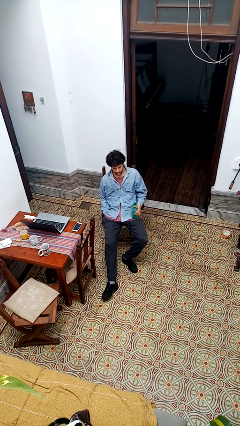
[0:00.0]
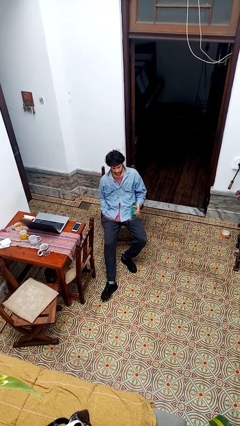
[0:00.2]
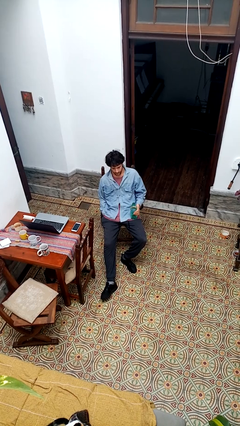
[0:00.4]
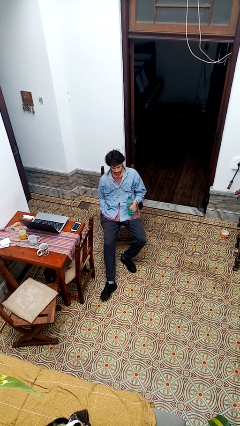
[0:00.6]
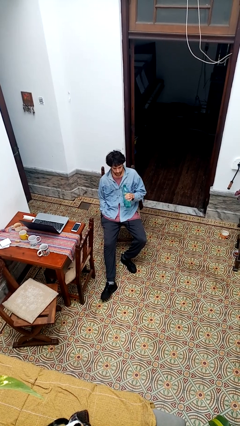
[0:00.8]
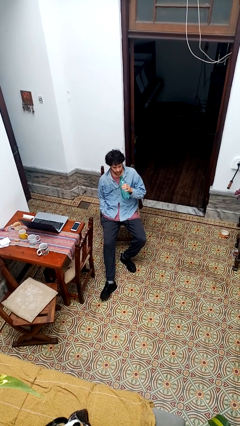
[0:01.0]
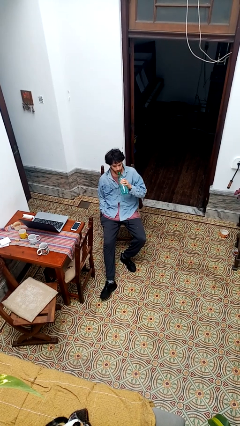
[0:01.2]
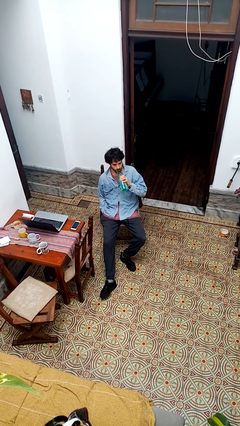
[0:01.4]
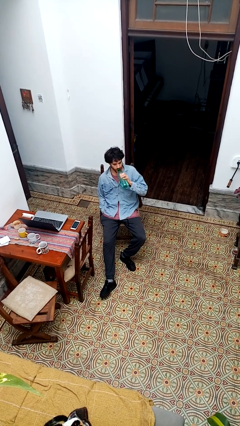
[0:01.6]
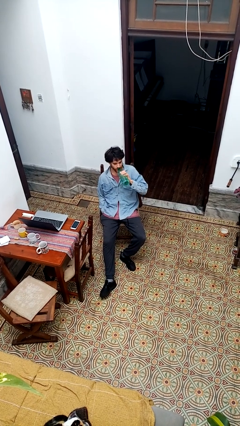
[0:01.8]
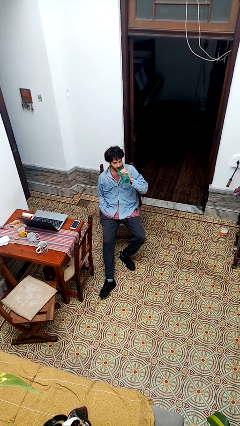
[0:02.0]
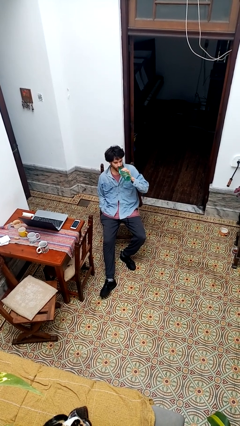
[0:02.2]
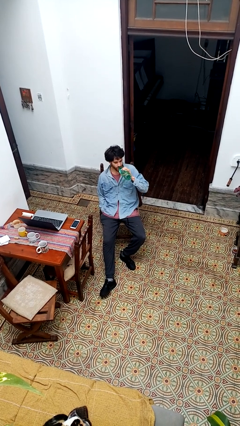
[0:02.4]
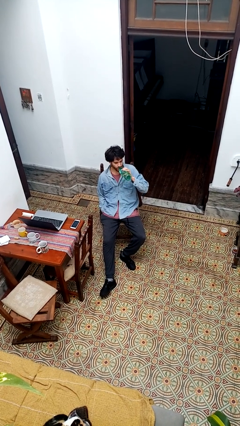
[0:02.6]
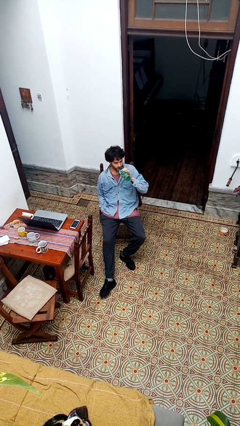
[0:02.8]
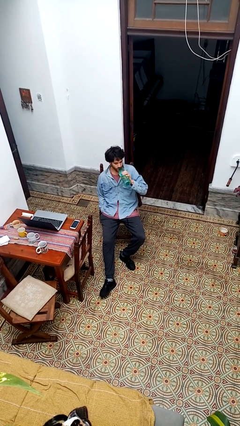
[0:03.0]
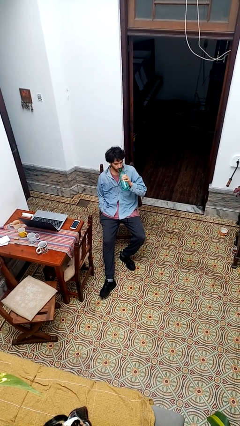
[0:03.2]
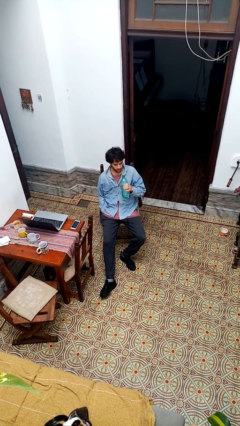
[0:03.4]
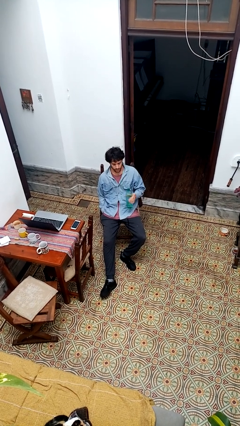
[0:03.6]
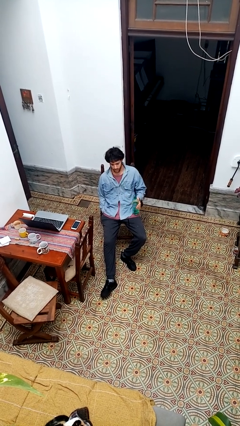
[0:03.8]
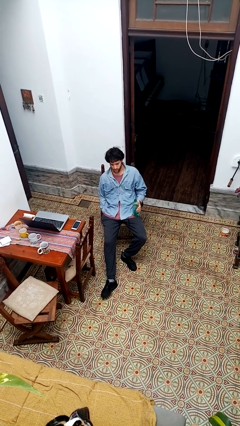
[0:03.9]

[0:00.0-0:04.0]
person drinks from bottle

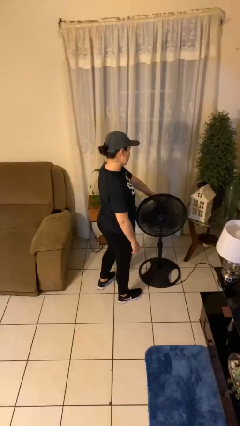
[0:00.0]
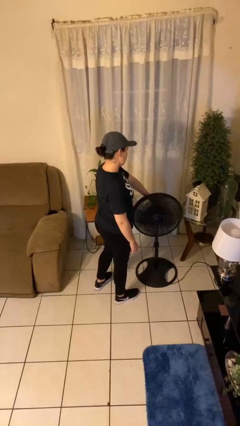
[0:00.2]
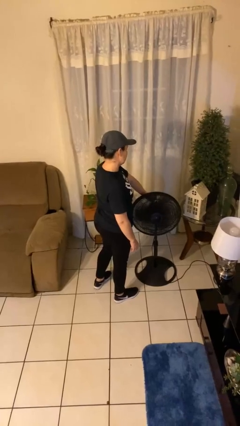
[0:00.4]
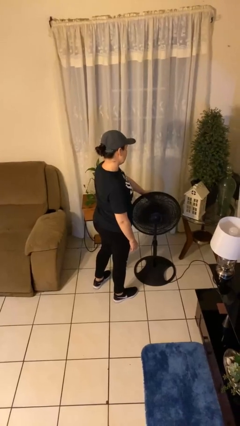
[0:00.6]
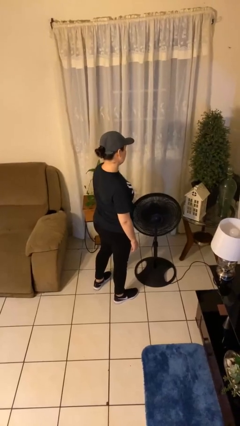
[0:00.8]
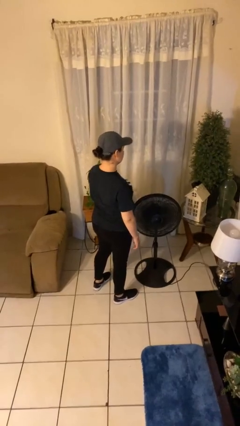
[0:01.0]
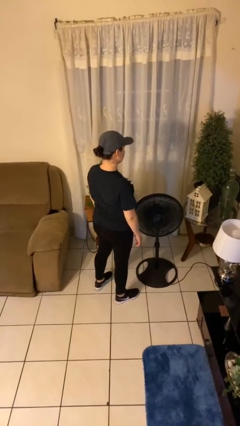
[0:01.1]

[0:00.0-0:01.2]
person turns on fan

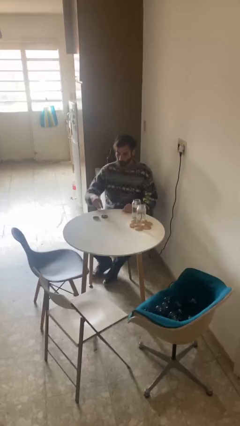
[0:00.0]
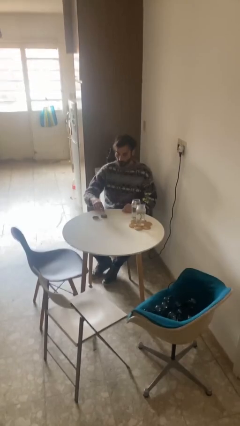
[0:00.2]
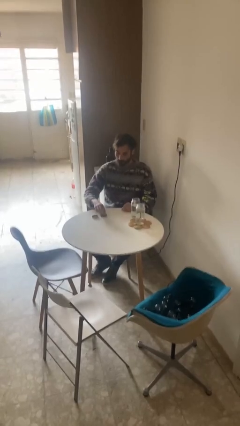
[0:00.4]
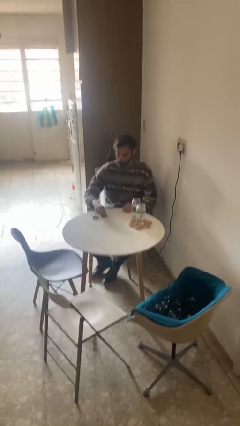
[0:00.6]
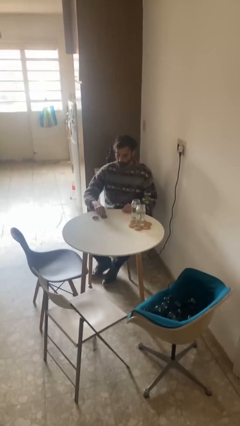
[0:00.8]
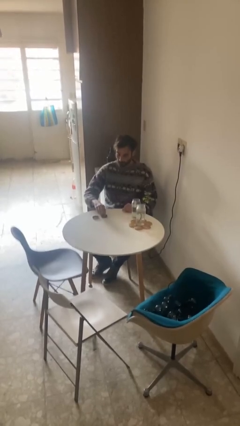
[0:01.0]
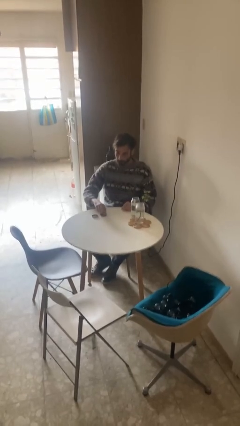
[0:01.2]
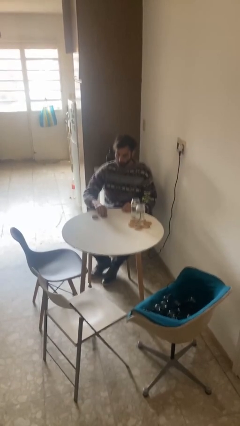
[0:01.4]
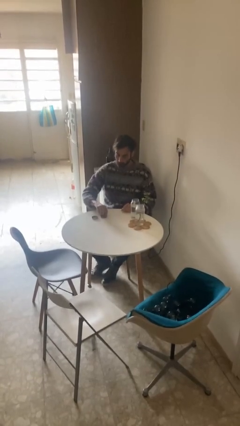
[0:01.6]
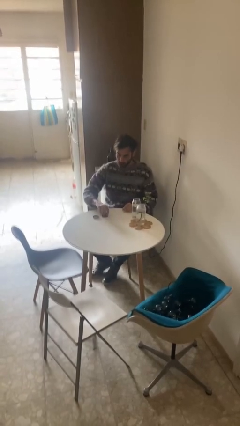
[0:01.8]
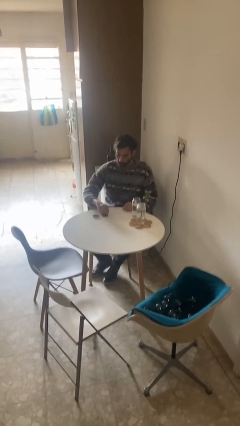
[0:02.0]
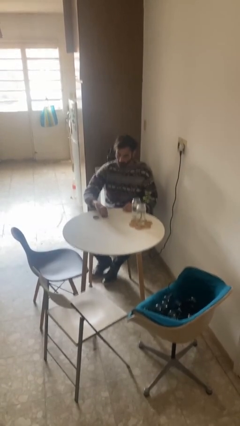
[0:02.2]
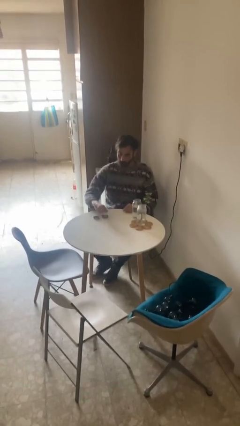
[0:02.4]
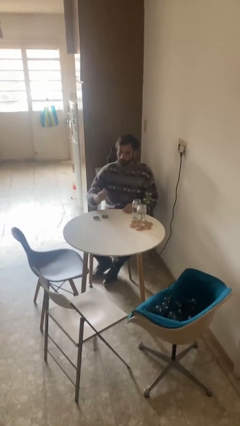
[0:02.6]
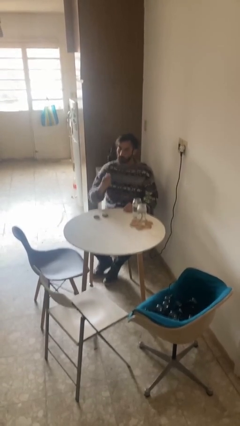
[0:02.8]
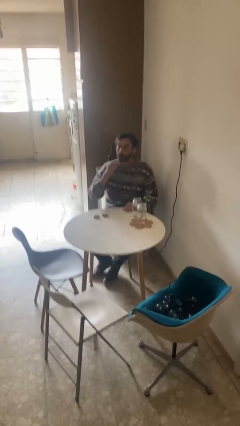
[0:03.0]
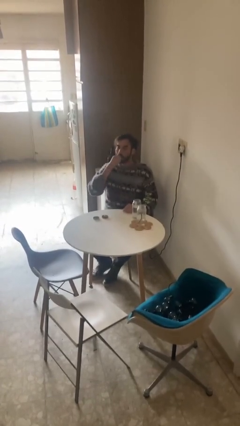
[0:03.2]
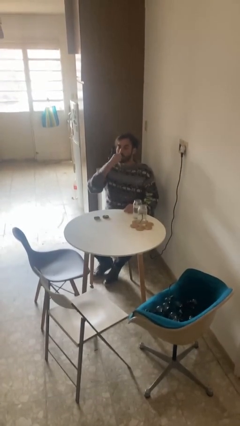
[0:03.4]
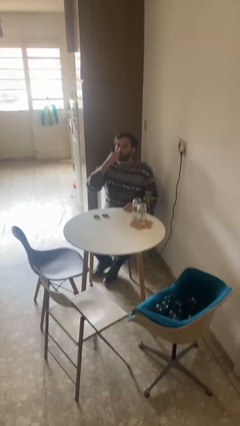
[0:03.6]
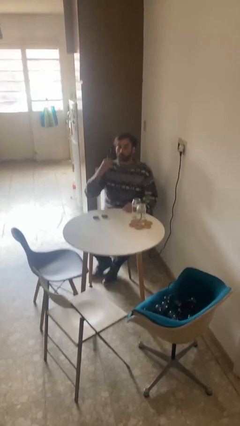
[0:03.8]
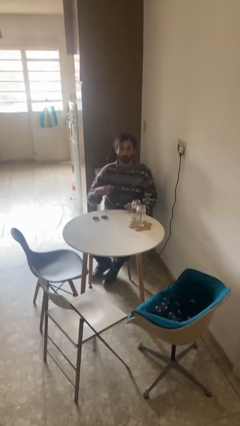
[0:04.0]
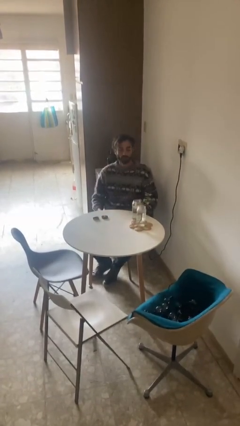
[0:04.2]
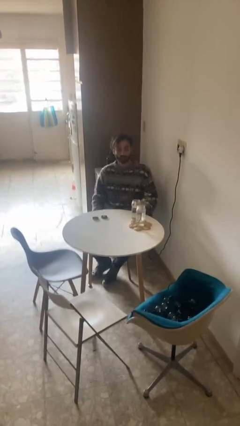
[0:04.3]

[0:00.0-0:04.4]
person takes medicine pills

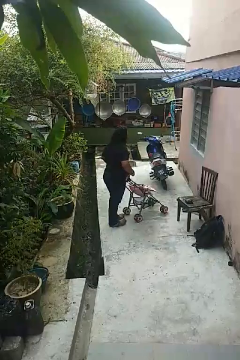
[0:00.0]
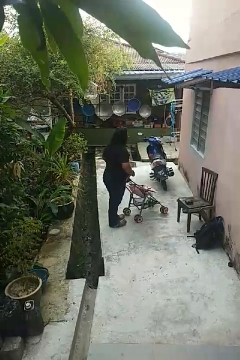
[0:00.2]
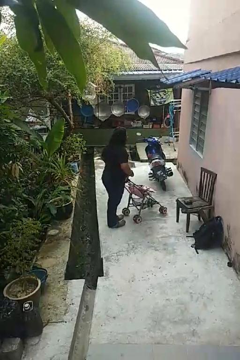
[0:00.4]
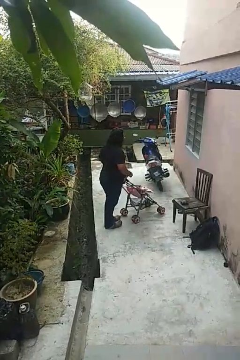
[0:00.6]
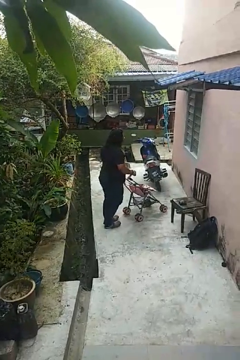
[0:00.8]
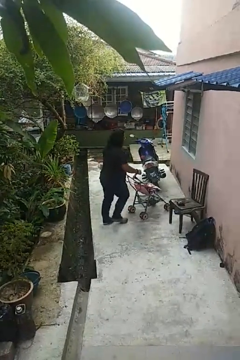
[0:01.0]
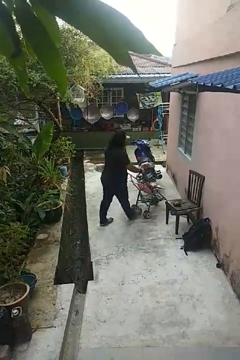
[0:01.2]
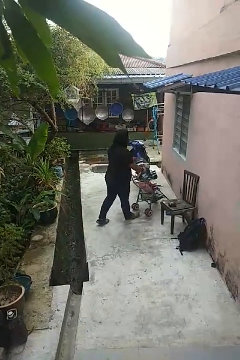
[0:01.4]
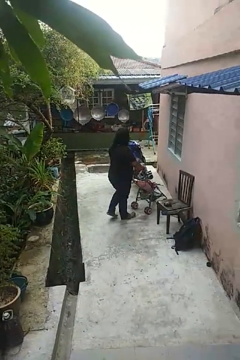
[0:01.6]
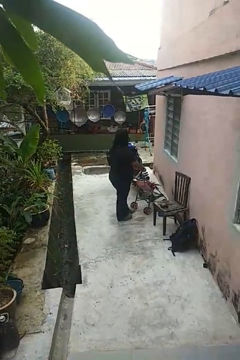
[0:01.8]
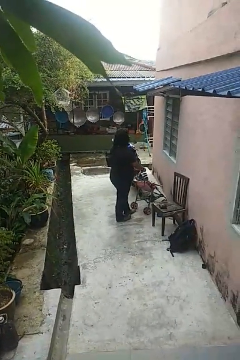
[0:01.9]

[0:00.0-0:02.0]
person pushes wheeled cart

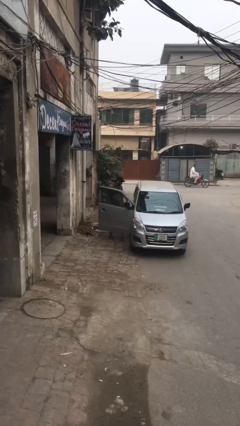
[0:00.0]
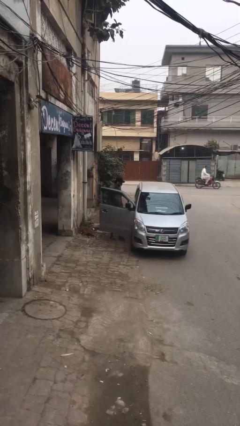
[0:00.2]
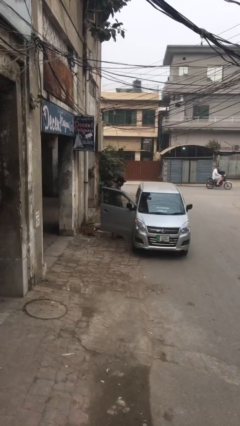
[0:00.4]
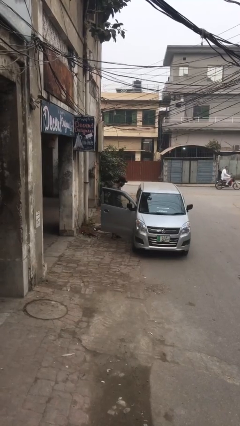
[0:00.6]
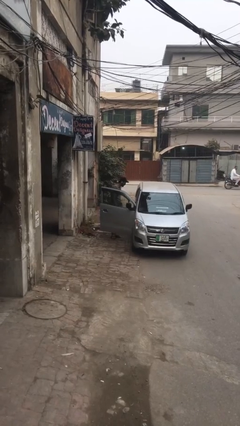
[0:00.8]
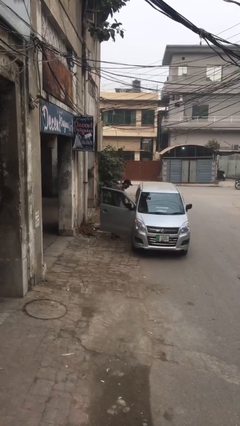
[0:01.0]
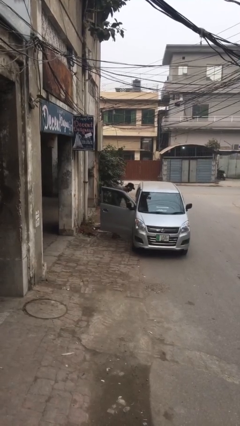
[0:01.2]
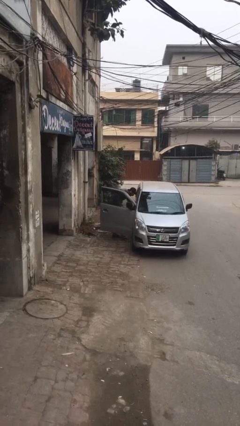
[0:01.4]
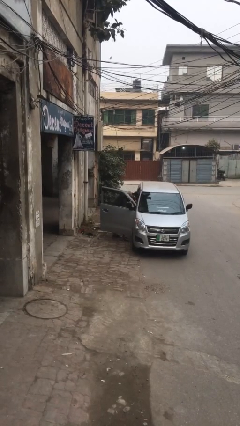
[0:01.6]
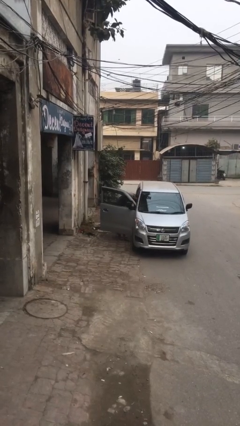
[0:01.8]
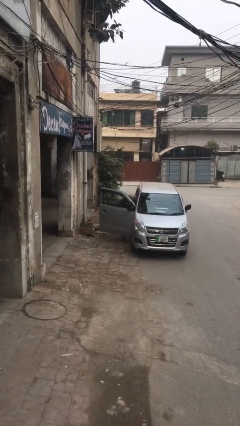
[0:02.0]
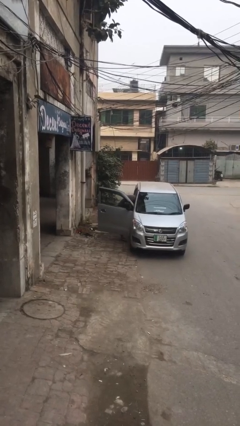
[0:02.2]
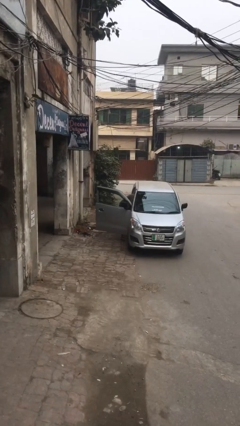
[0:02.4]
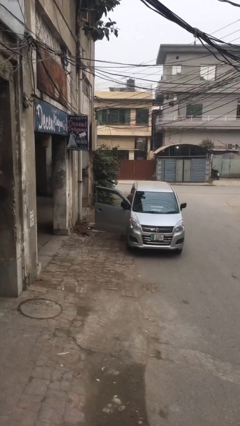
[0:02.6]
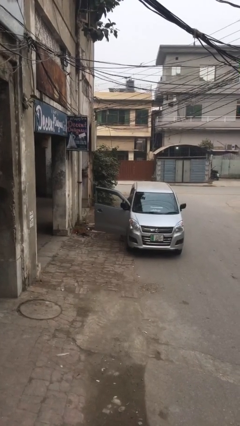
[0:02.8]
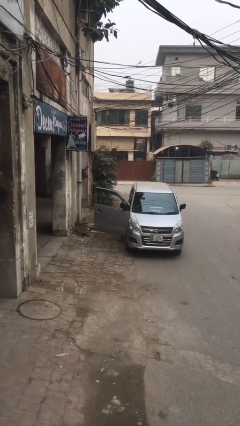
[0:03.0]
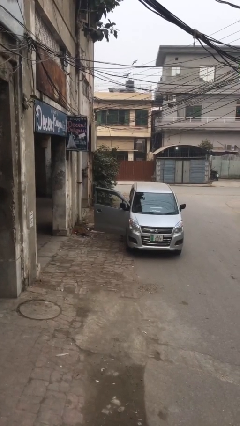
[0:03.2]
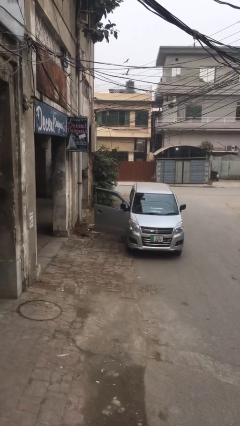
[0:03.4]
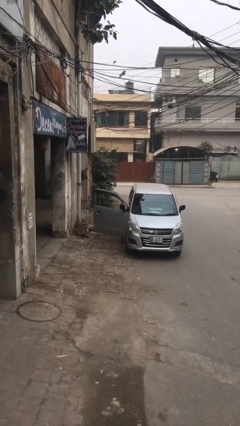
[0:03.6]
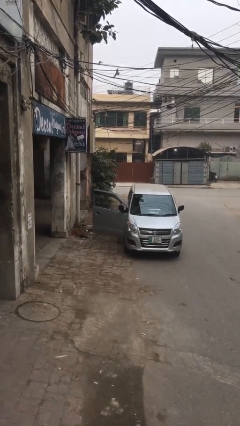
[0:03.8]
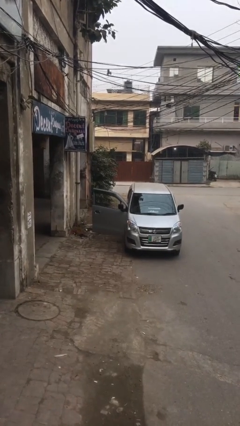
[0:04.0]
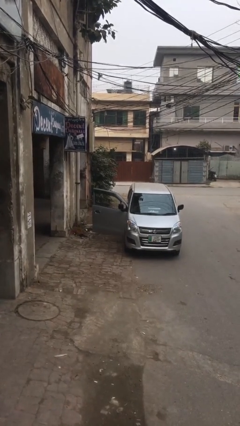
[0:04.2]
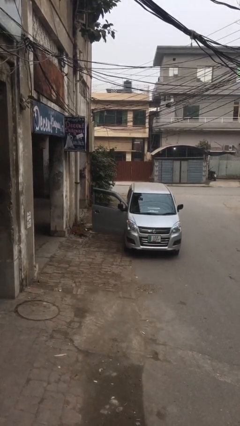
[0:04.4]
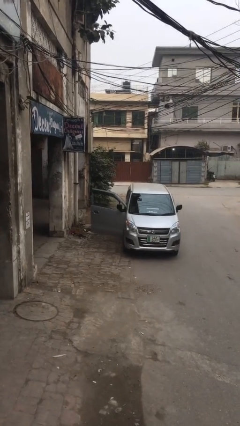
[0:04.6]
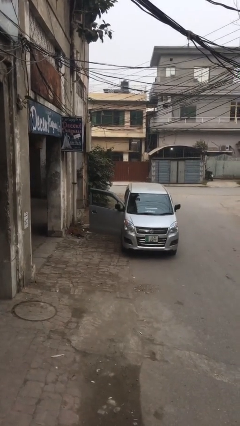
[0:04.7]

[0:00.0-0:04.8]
person enters car

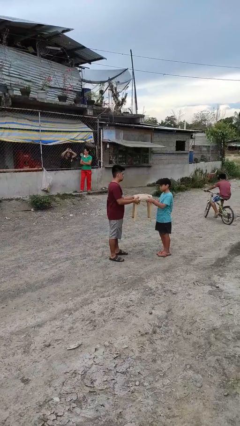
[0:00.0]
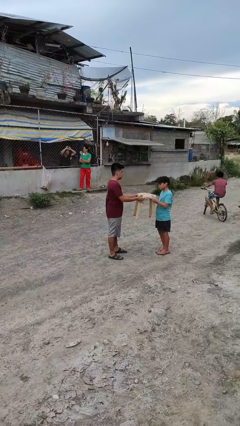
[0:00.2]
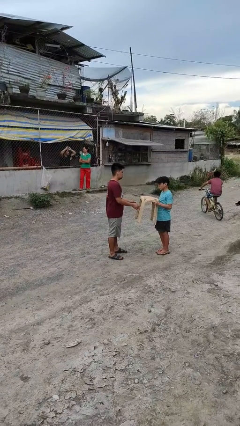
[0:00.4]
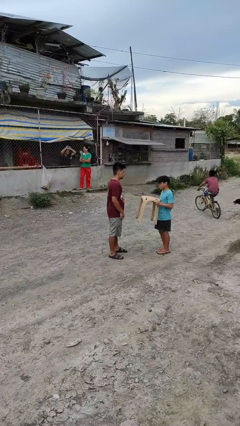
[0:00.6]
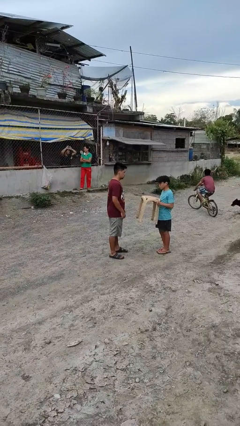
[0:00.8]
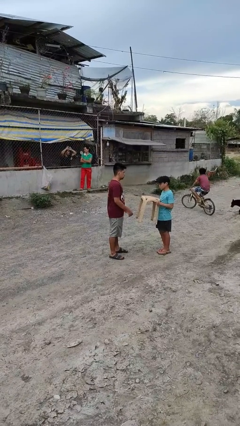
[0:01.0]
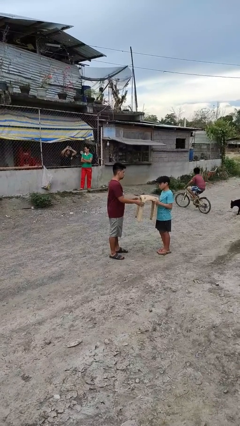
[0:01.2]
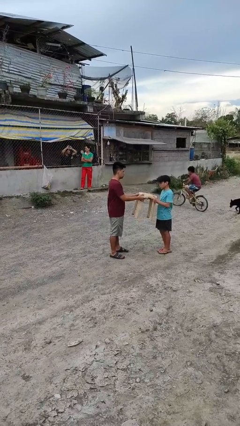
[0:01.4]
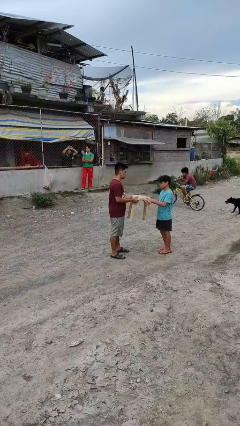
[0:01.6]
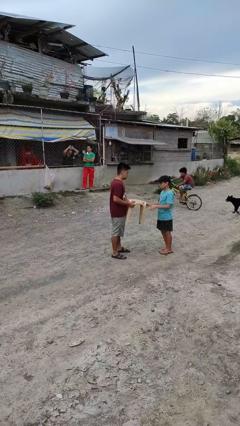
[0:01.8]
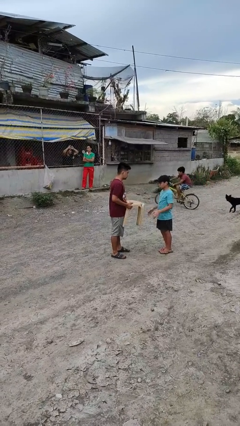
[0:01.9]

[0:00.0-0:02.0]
person transfers object to person
